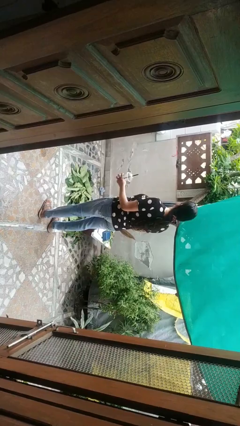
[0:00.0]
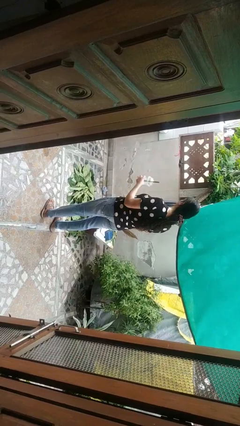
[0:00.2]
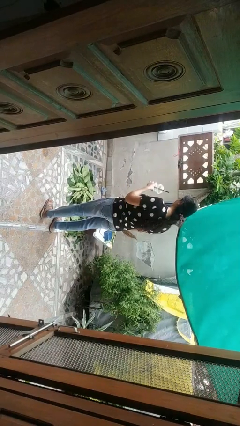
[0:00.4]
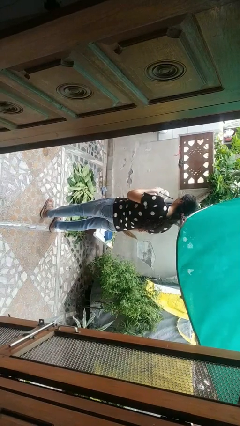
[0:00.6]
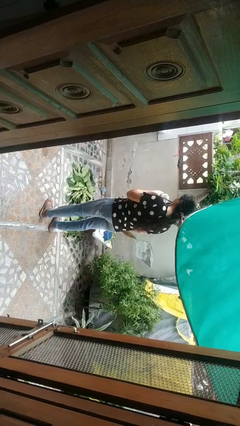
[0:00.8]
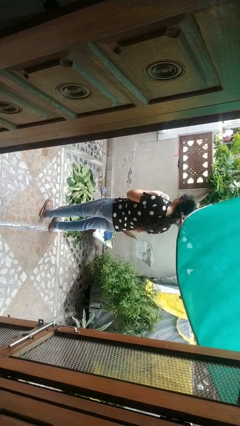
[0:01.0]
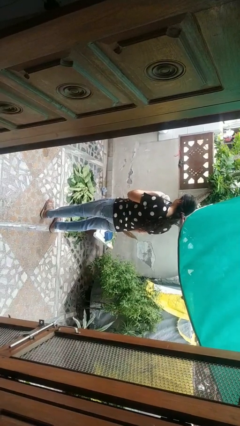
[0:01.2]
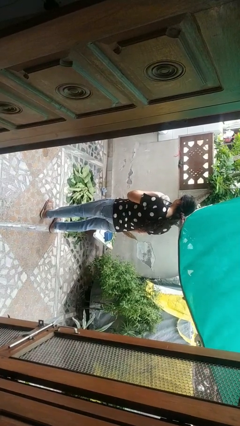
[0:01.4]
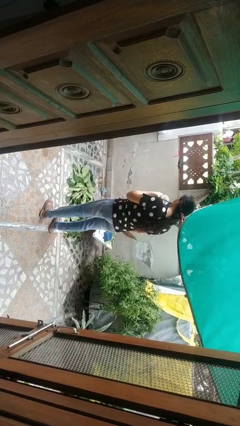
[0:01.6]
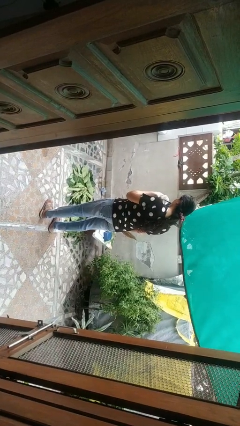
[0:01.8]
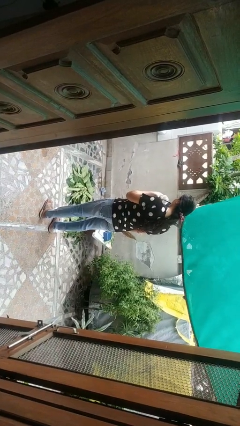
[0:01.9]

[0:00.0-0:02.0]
person drinks from straw

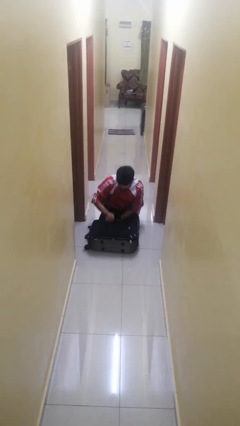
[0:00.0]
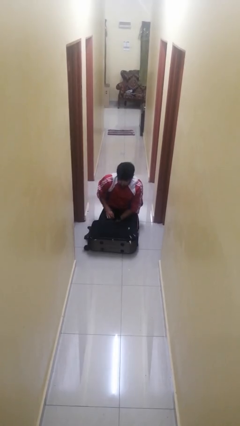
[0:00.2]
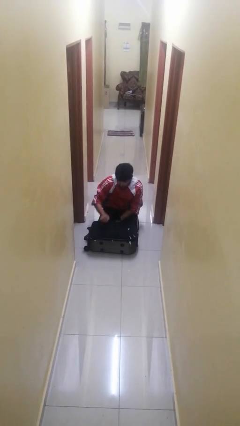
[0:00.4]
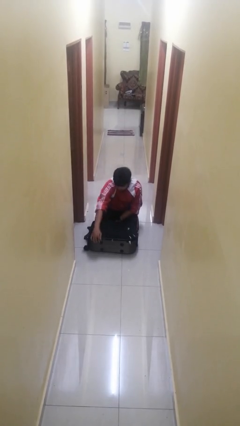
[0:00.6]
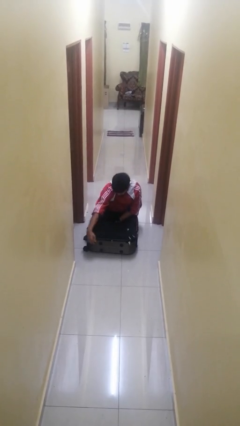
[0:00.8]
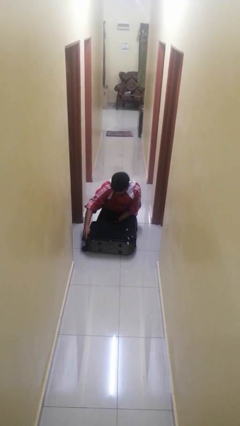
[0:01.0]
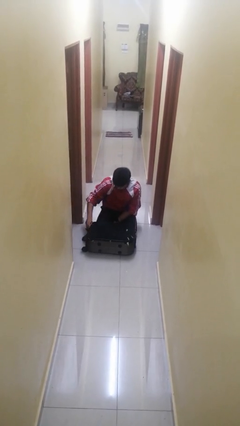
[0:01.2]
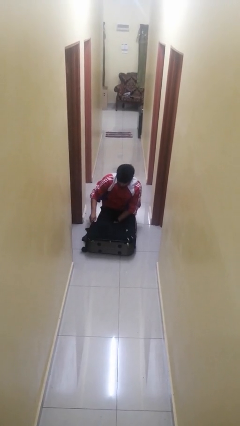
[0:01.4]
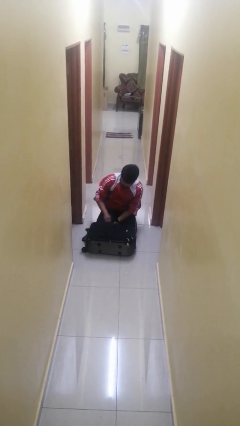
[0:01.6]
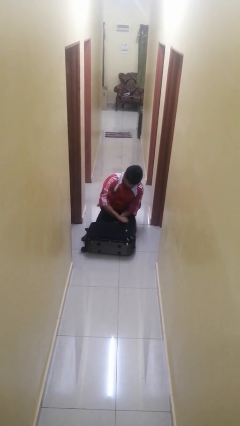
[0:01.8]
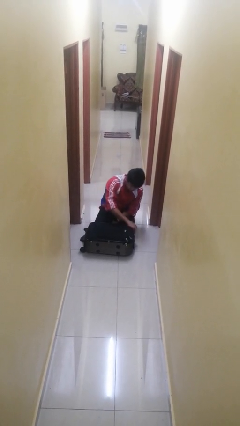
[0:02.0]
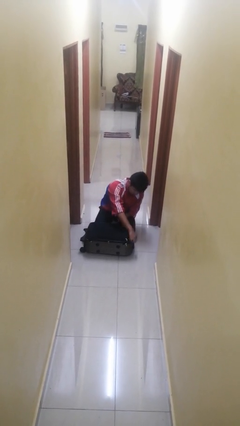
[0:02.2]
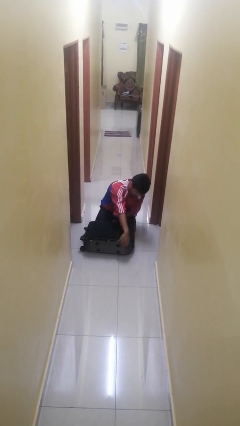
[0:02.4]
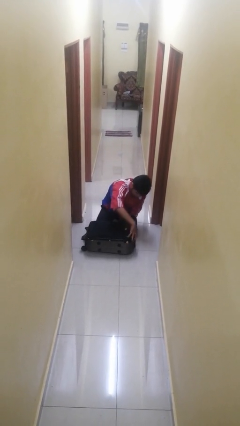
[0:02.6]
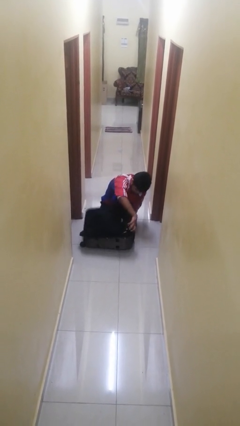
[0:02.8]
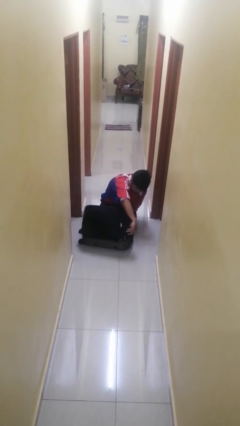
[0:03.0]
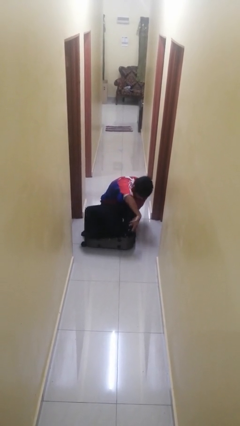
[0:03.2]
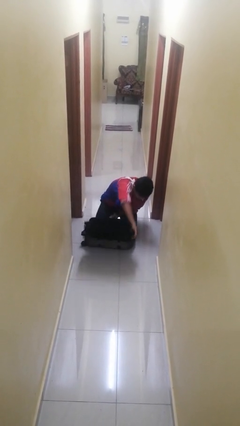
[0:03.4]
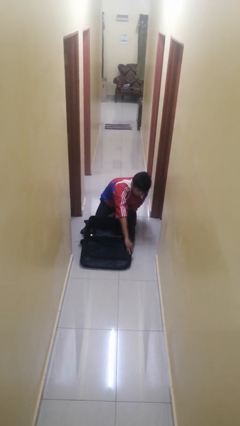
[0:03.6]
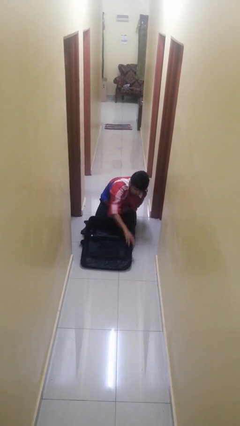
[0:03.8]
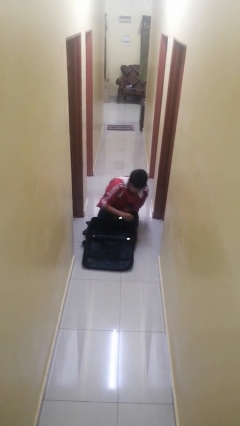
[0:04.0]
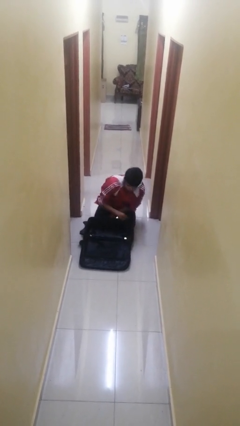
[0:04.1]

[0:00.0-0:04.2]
person opens suitcase

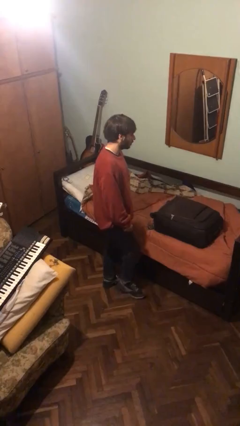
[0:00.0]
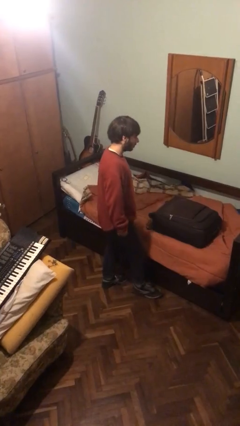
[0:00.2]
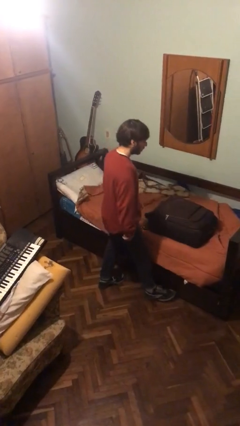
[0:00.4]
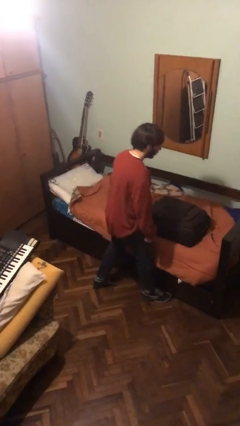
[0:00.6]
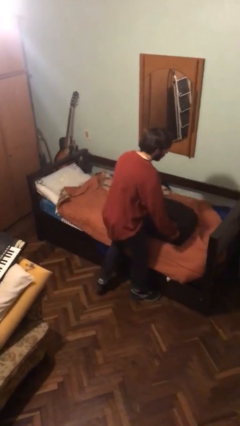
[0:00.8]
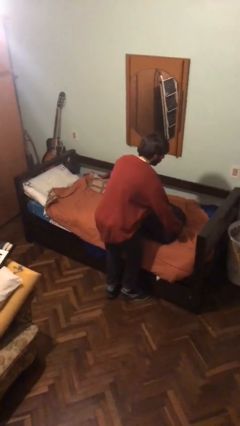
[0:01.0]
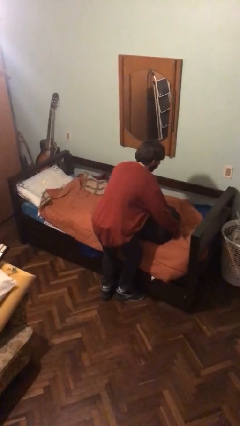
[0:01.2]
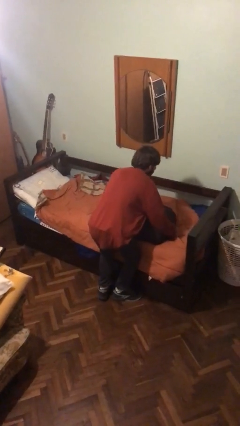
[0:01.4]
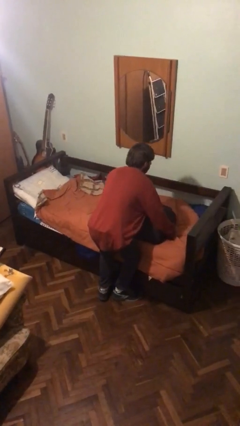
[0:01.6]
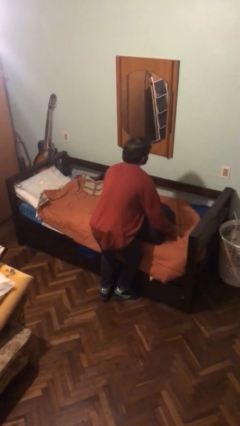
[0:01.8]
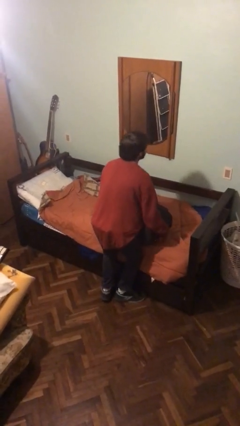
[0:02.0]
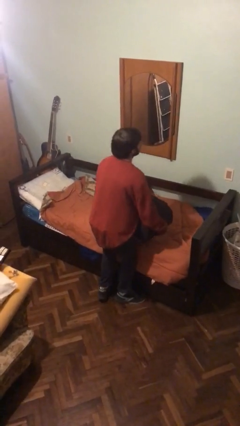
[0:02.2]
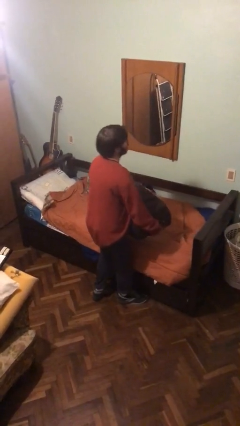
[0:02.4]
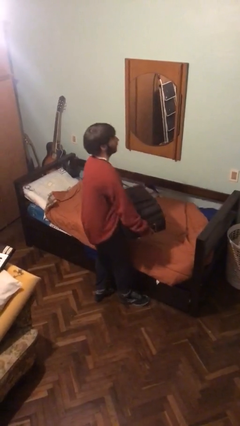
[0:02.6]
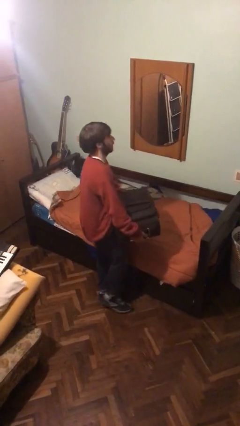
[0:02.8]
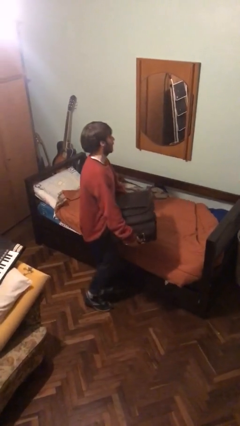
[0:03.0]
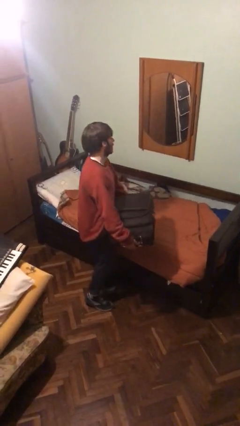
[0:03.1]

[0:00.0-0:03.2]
person picks up object from bed

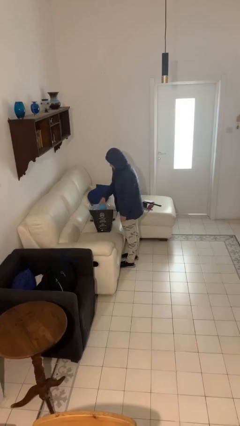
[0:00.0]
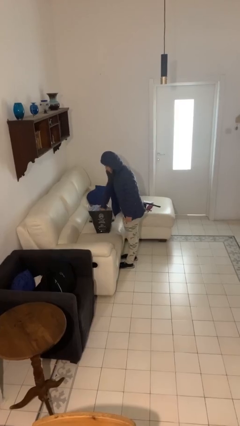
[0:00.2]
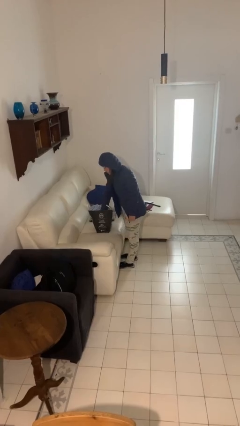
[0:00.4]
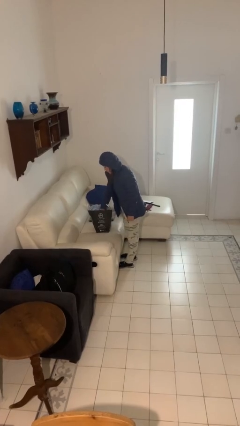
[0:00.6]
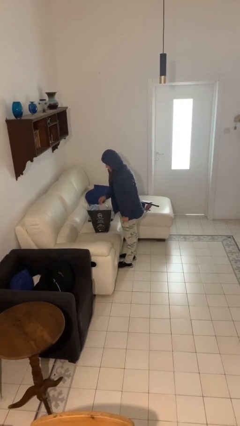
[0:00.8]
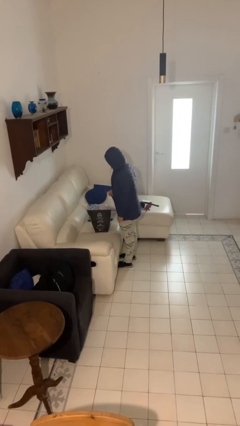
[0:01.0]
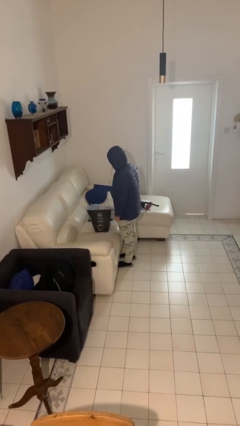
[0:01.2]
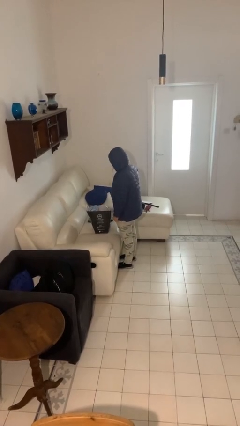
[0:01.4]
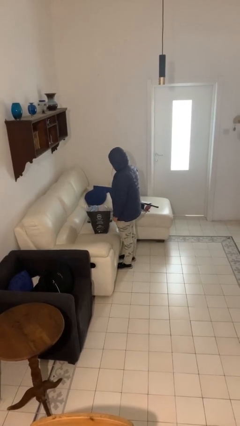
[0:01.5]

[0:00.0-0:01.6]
person puts object into bag

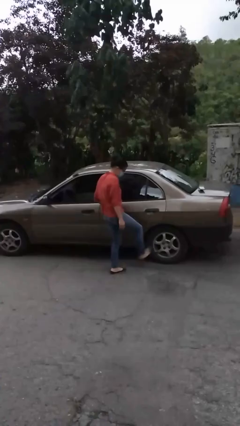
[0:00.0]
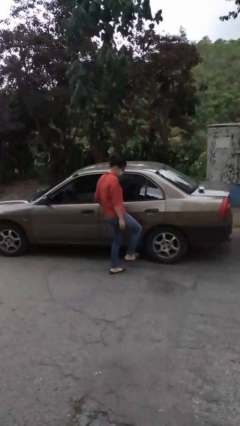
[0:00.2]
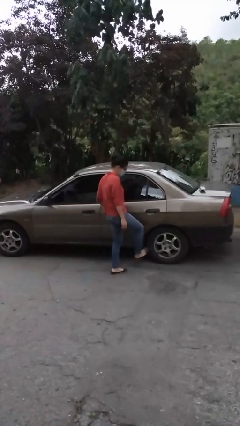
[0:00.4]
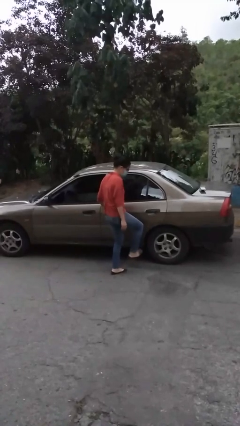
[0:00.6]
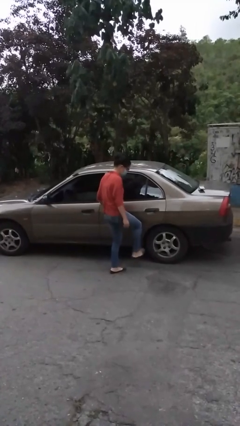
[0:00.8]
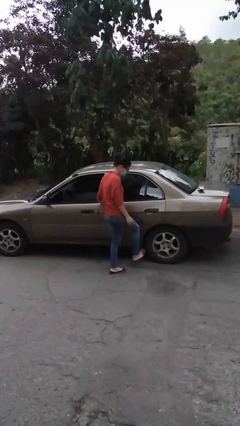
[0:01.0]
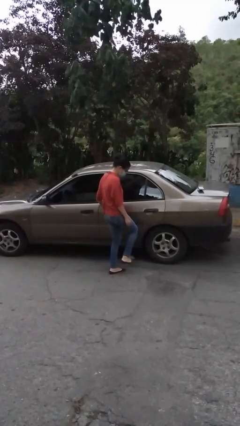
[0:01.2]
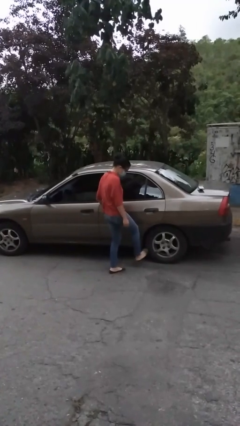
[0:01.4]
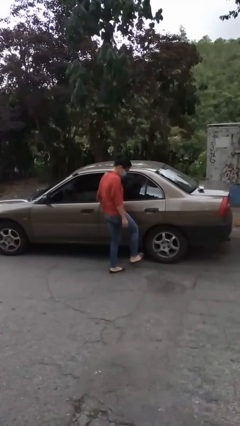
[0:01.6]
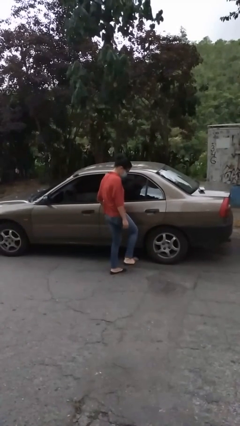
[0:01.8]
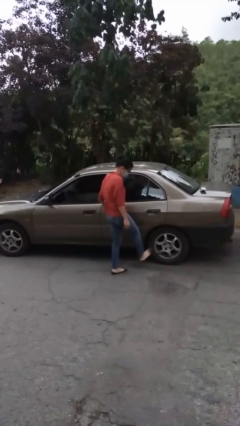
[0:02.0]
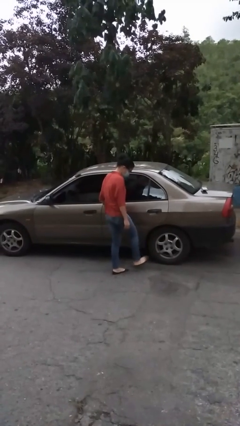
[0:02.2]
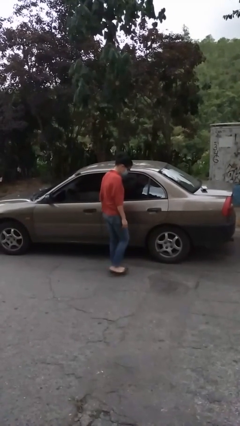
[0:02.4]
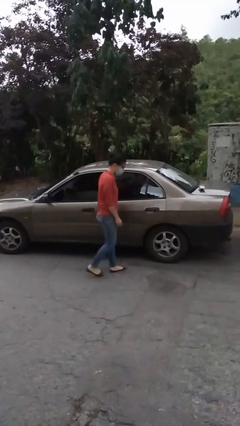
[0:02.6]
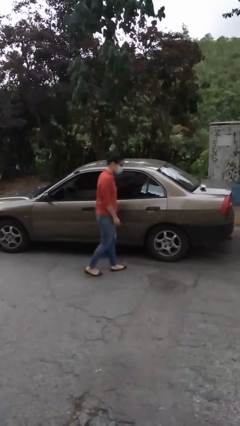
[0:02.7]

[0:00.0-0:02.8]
person kicks car tires

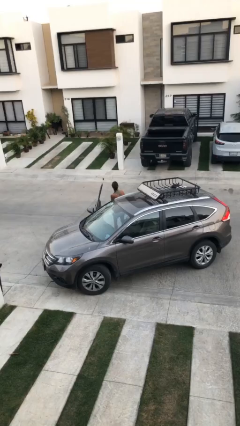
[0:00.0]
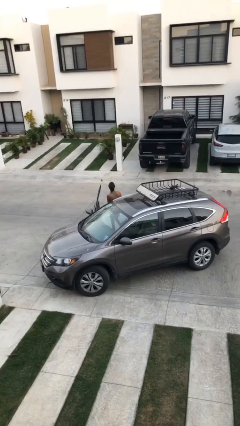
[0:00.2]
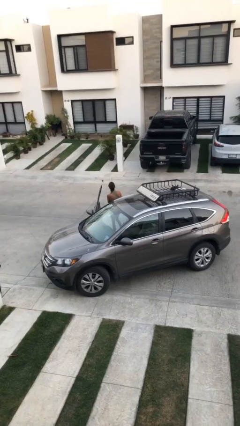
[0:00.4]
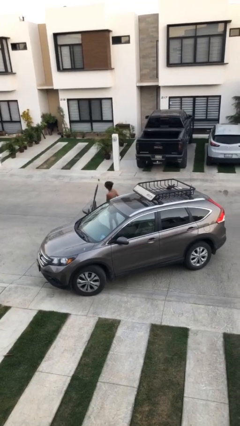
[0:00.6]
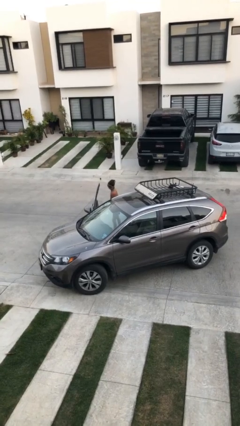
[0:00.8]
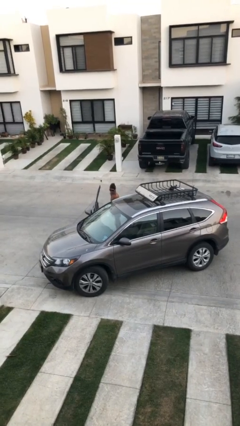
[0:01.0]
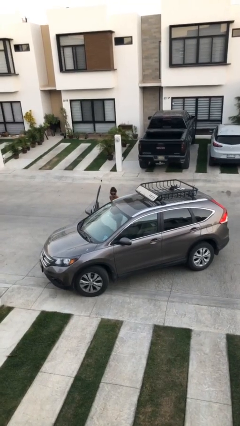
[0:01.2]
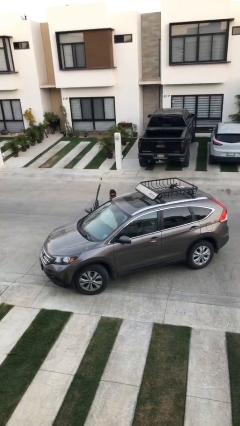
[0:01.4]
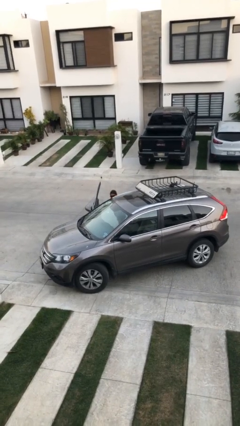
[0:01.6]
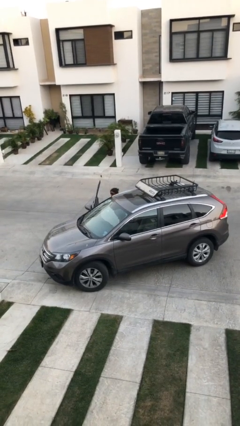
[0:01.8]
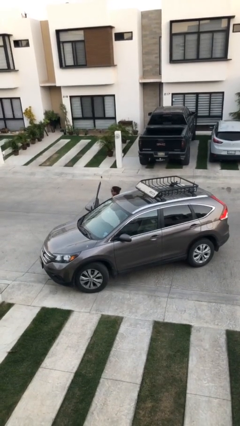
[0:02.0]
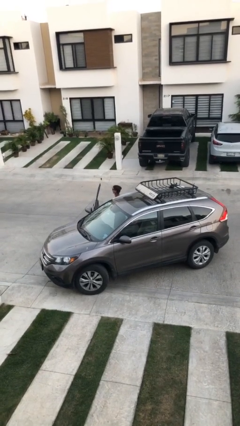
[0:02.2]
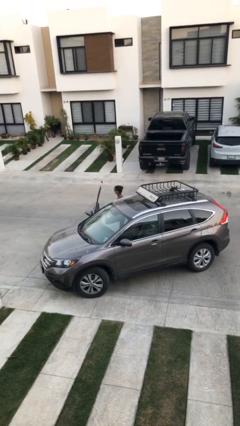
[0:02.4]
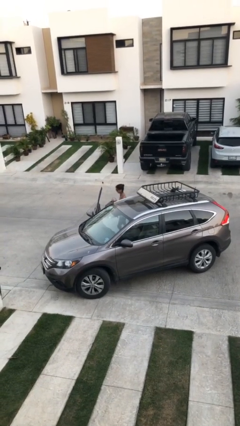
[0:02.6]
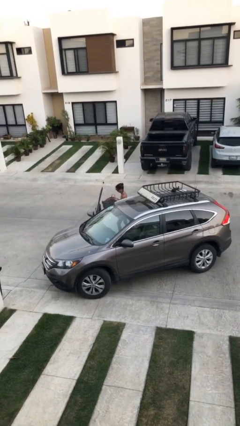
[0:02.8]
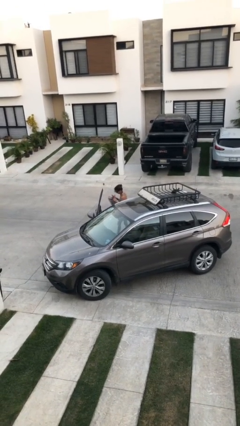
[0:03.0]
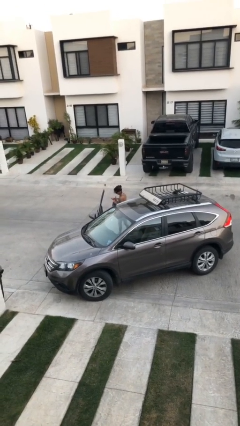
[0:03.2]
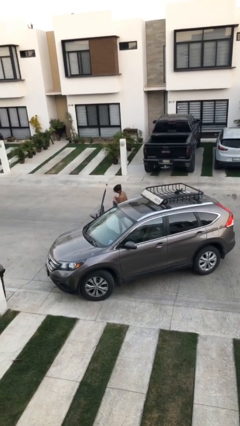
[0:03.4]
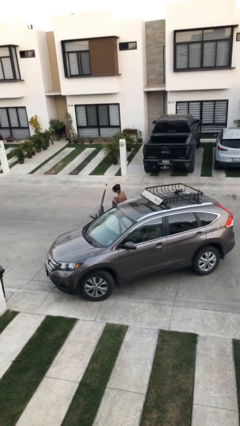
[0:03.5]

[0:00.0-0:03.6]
person unloads car
